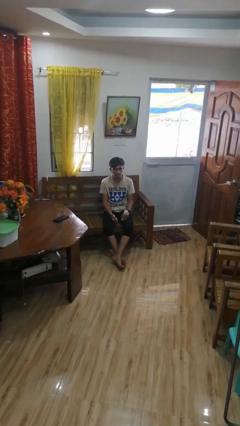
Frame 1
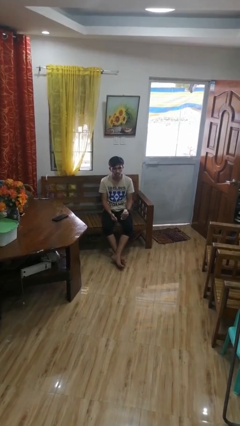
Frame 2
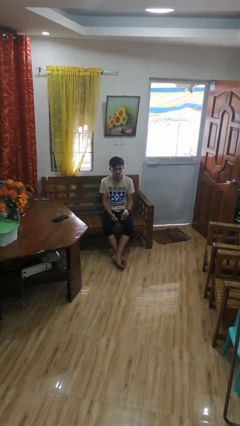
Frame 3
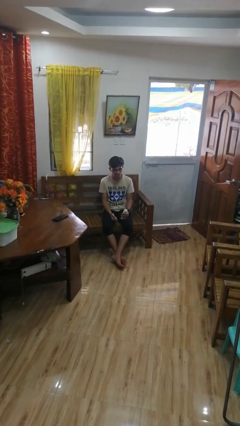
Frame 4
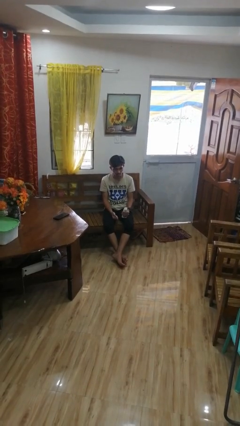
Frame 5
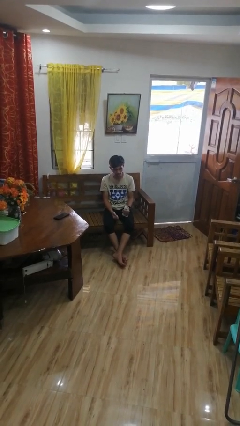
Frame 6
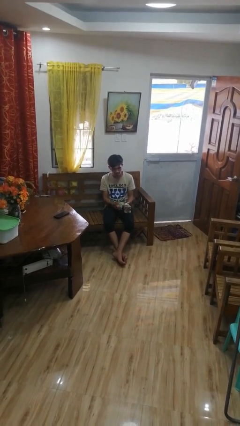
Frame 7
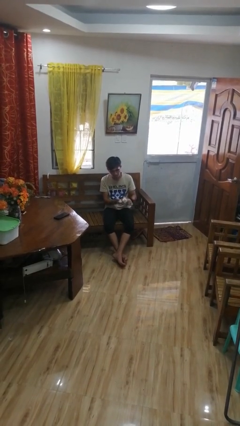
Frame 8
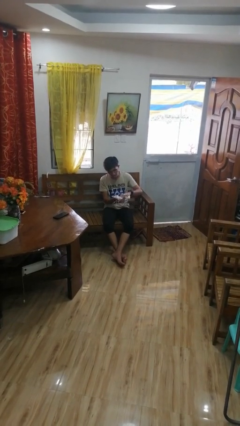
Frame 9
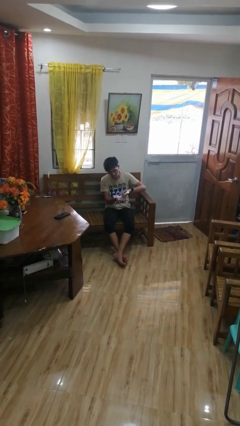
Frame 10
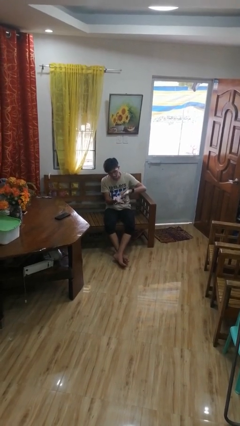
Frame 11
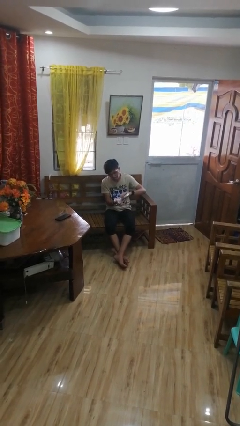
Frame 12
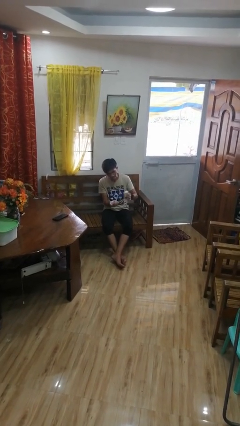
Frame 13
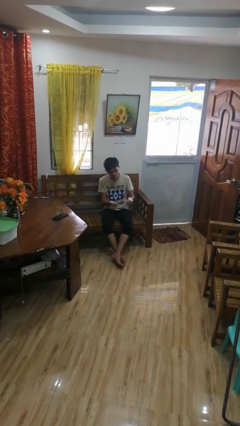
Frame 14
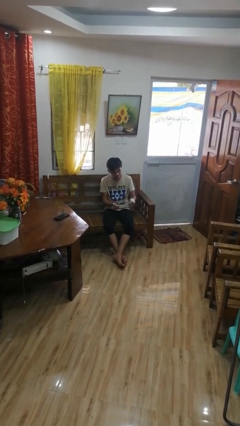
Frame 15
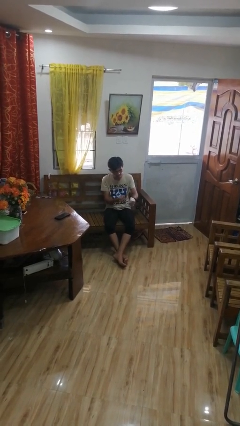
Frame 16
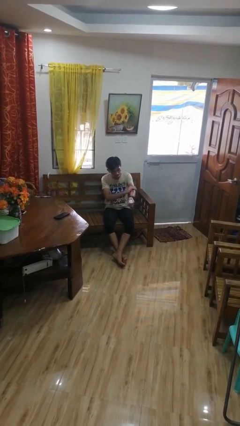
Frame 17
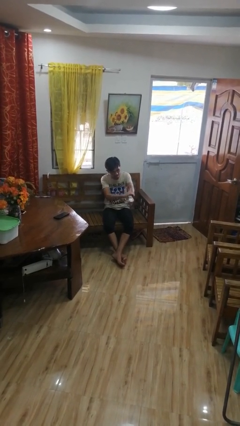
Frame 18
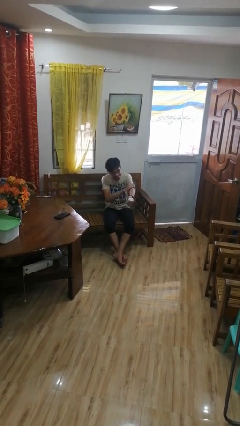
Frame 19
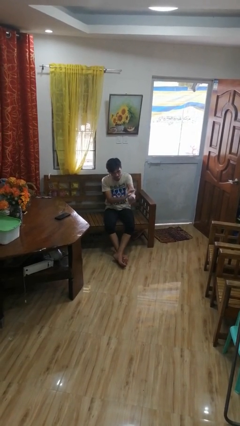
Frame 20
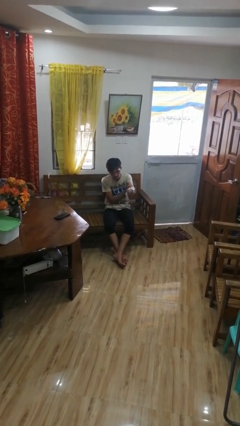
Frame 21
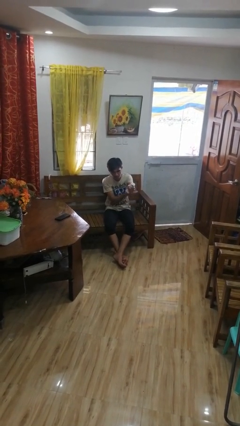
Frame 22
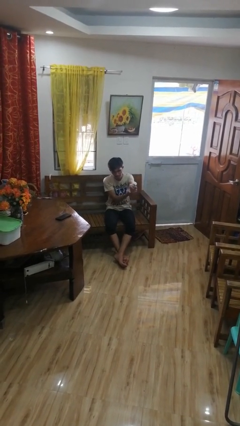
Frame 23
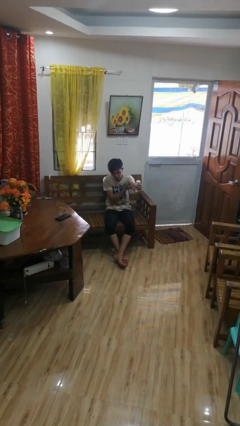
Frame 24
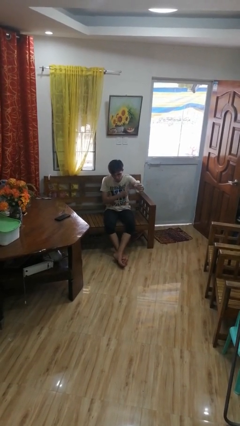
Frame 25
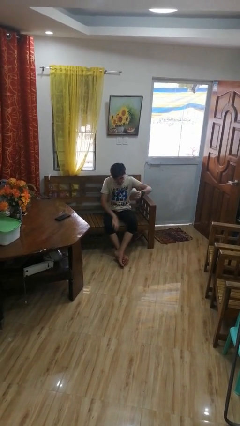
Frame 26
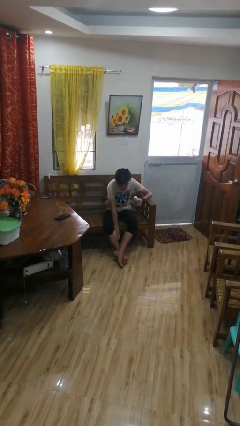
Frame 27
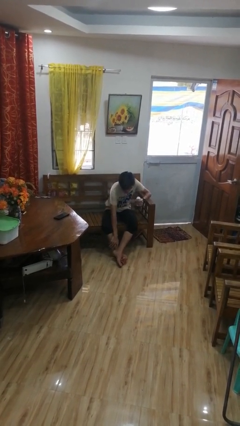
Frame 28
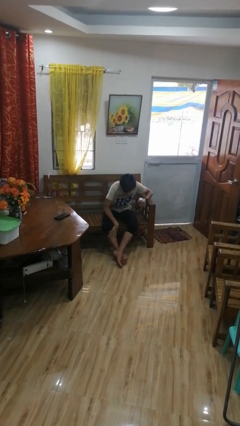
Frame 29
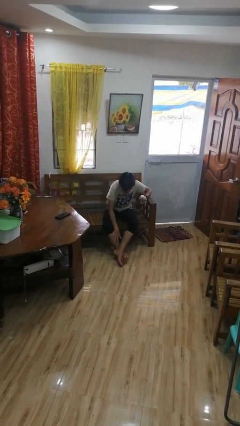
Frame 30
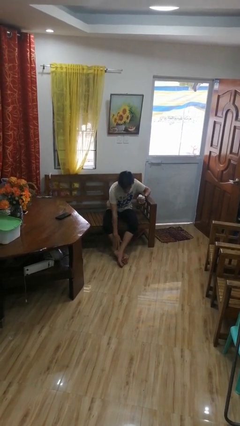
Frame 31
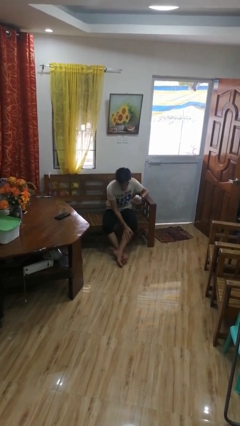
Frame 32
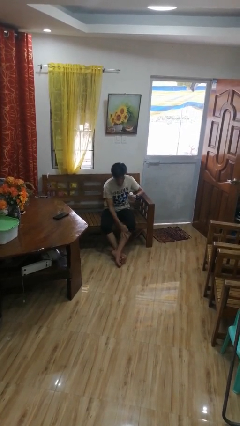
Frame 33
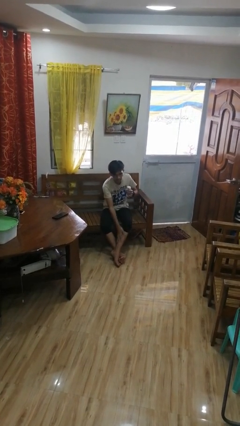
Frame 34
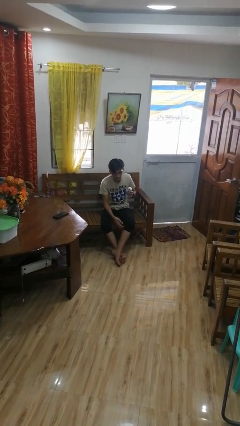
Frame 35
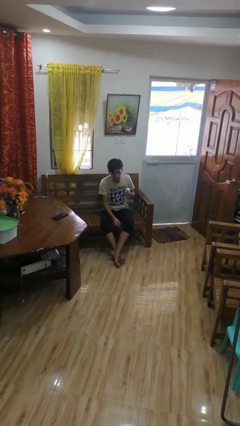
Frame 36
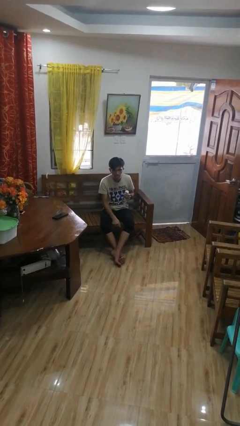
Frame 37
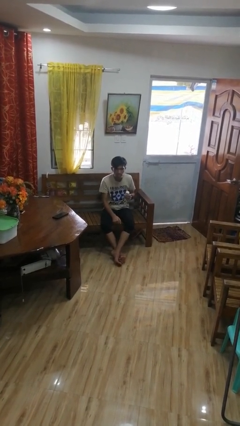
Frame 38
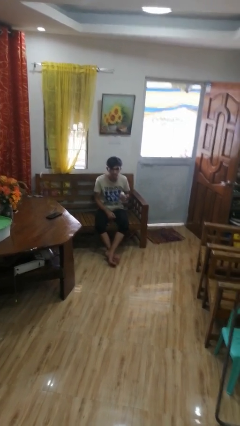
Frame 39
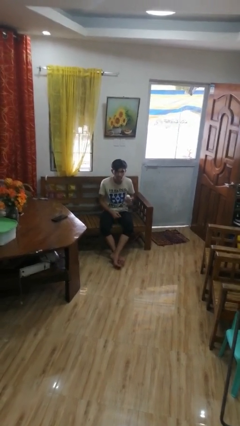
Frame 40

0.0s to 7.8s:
person applies sunscreen

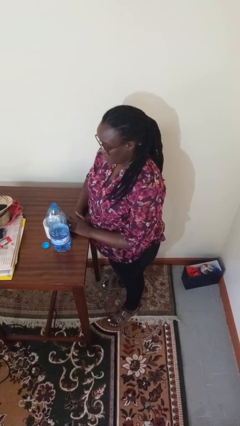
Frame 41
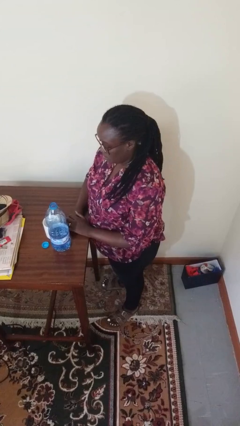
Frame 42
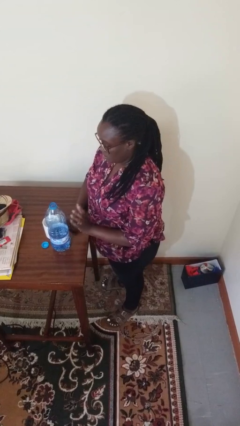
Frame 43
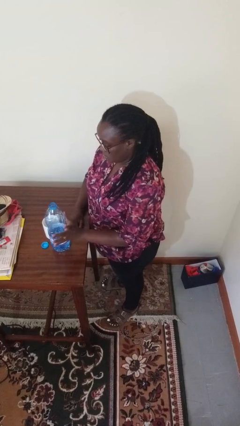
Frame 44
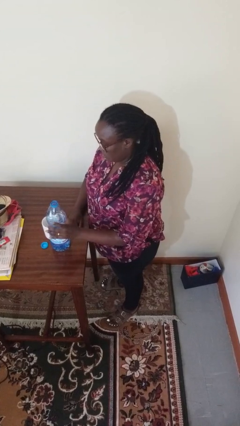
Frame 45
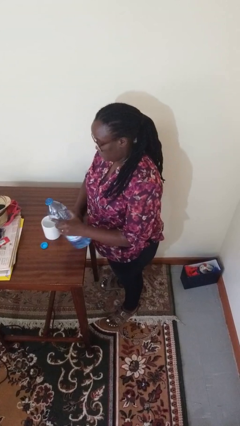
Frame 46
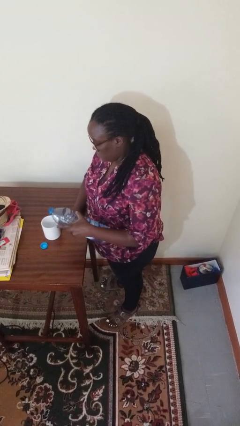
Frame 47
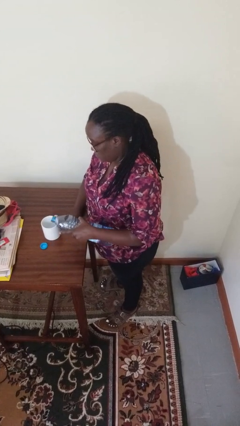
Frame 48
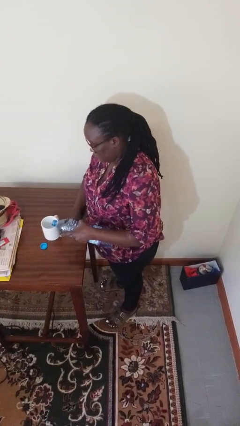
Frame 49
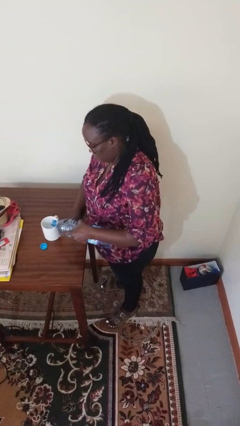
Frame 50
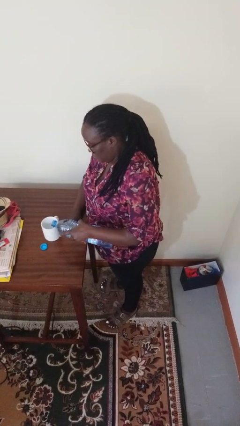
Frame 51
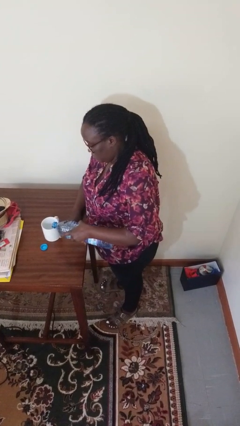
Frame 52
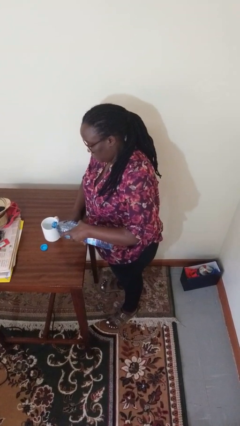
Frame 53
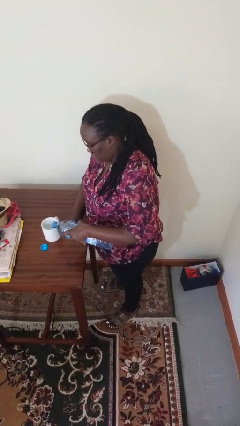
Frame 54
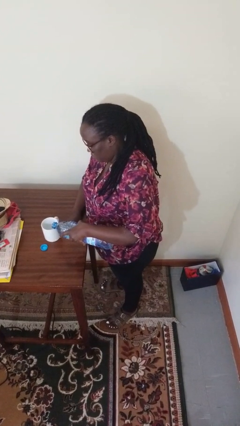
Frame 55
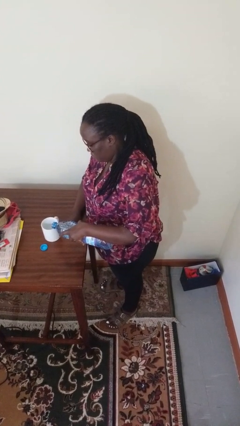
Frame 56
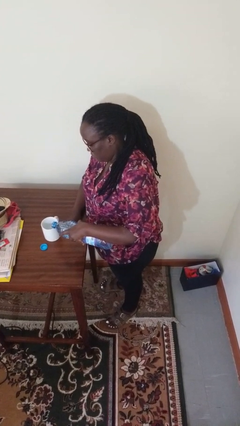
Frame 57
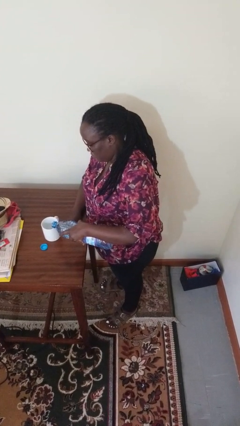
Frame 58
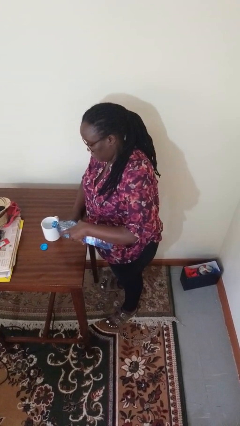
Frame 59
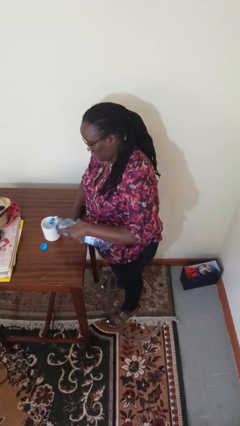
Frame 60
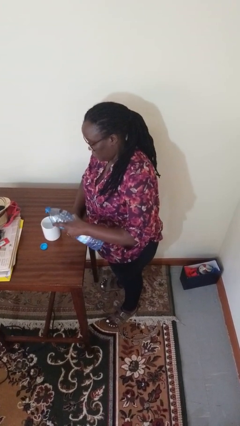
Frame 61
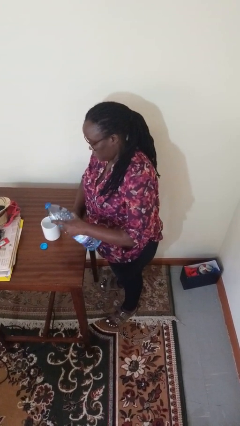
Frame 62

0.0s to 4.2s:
person pours liquid into cup

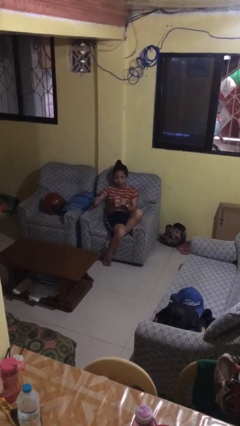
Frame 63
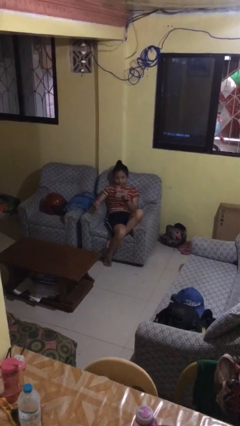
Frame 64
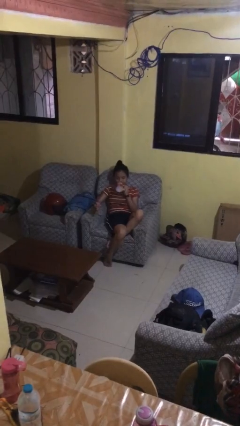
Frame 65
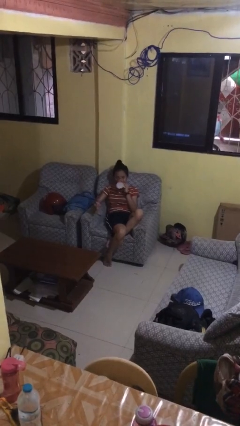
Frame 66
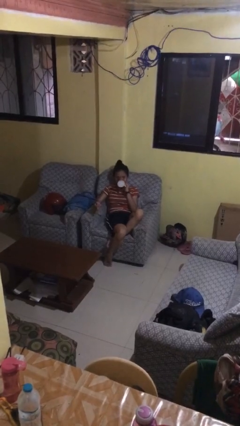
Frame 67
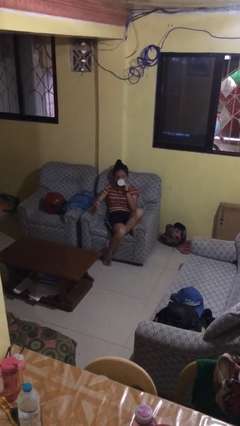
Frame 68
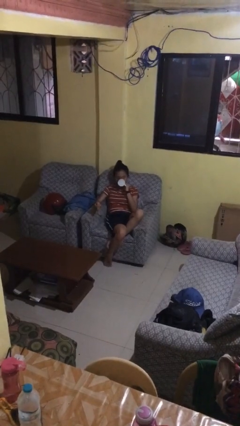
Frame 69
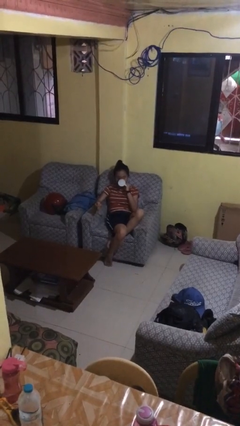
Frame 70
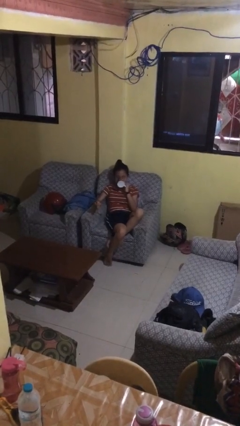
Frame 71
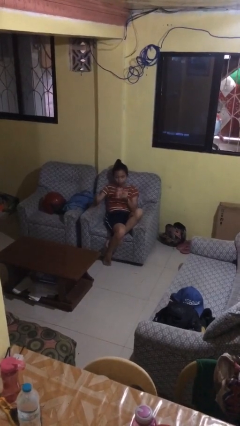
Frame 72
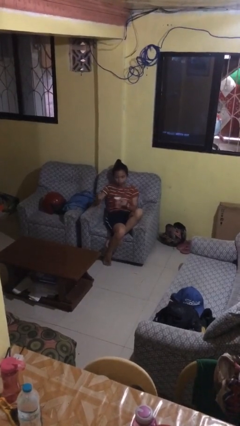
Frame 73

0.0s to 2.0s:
person drinks from mug

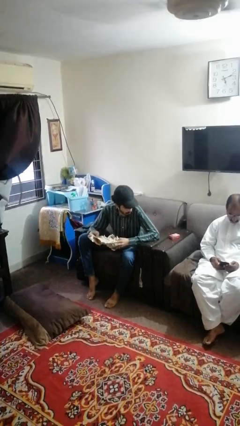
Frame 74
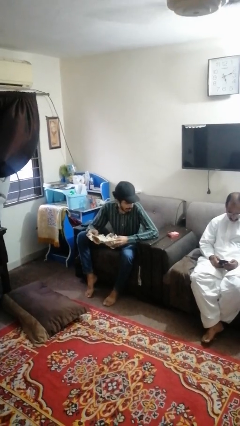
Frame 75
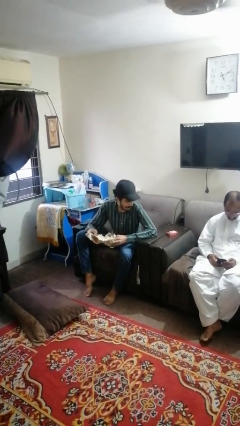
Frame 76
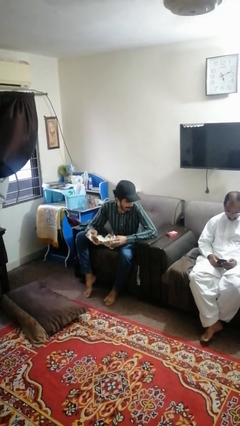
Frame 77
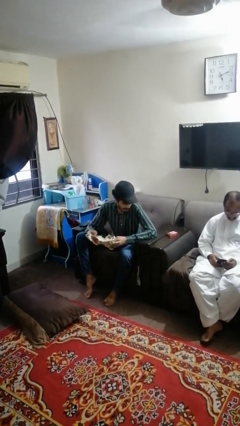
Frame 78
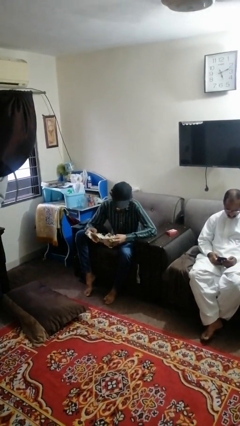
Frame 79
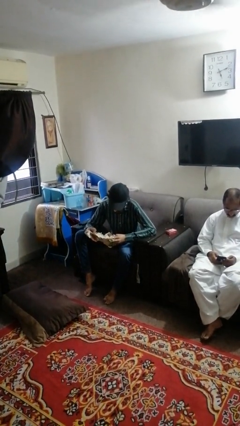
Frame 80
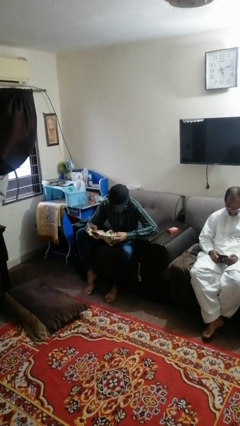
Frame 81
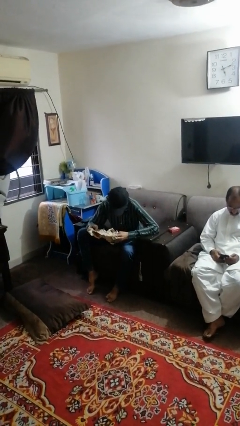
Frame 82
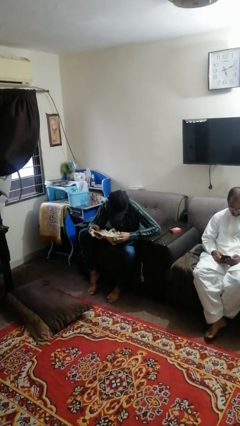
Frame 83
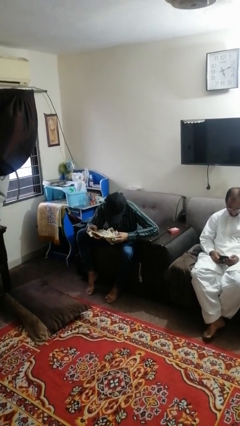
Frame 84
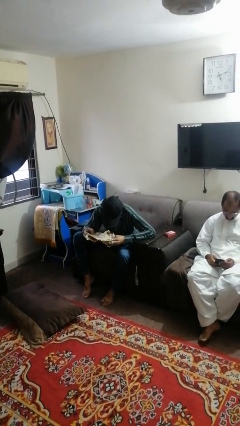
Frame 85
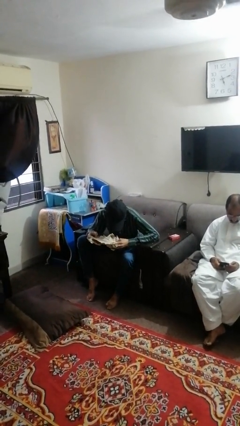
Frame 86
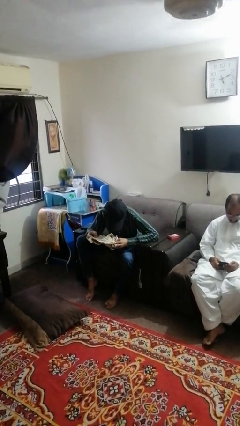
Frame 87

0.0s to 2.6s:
person reads newspaper

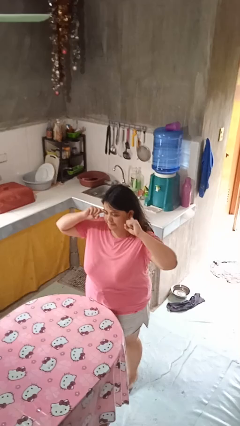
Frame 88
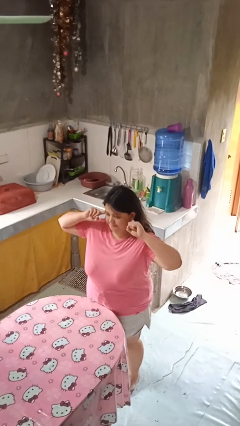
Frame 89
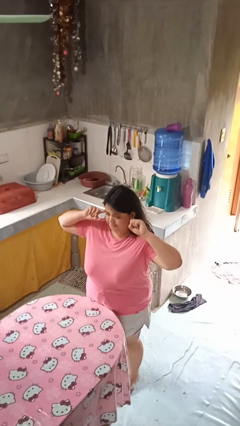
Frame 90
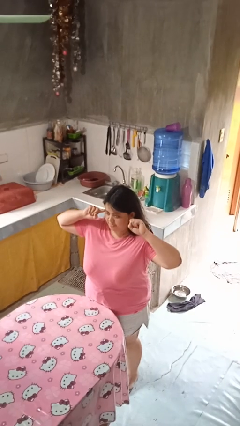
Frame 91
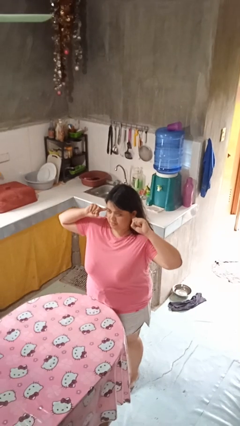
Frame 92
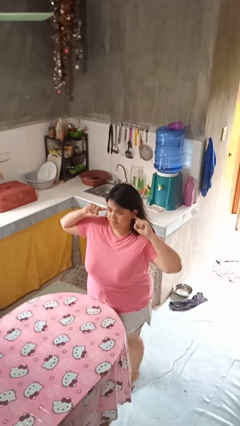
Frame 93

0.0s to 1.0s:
person puts fingers in ear
